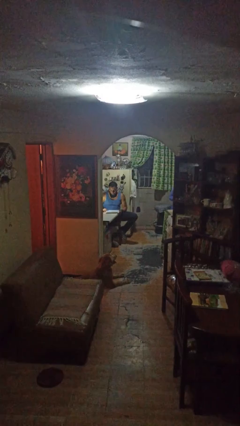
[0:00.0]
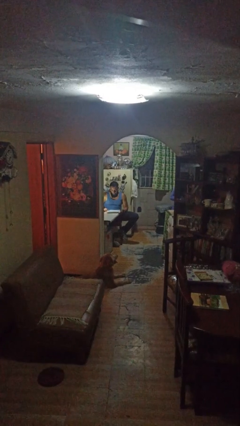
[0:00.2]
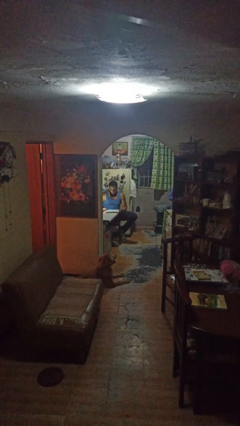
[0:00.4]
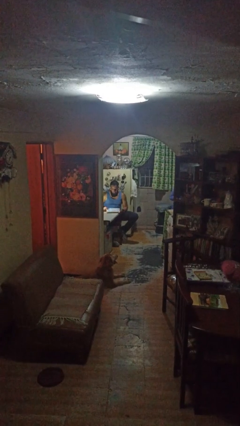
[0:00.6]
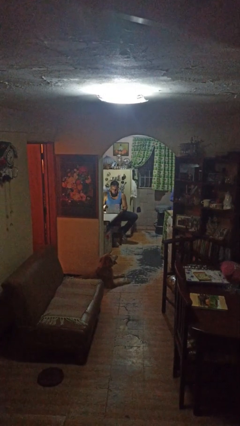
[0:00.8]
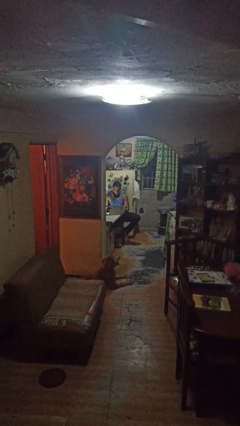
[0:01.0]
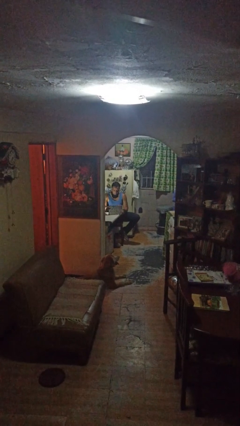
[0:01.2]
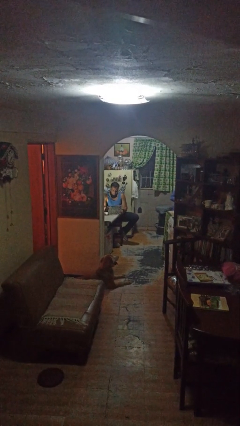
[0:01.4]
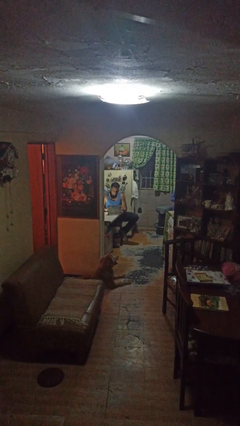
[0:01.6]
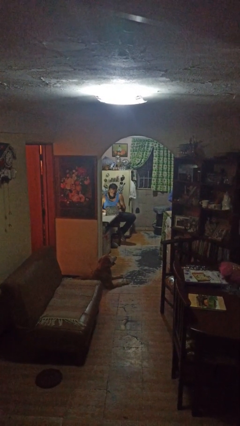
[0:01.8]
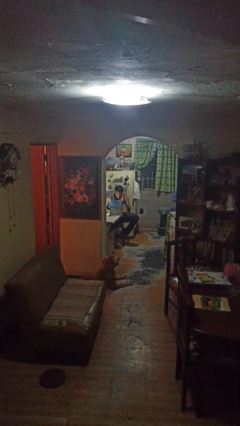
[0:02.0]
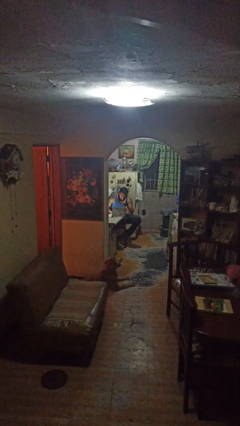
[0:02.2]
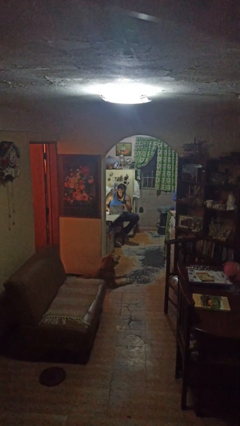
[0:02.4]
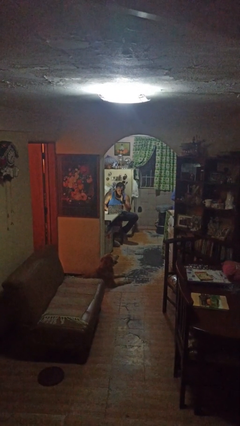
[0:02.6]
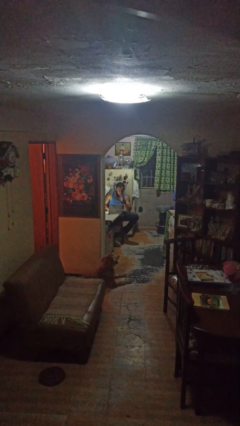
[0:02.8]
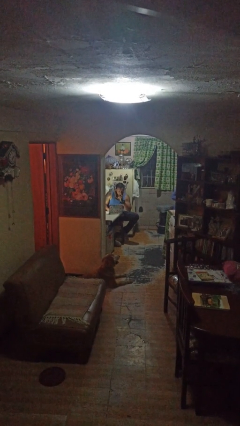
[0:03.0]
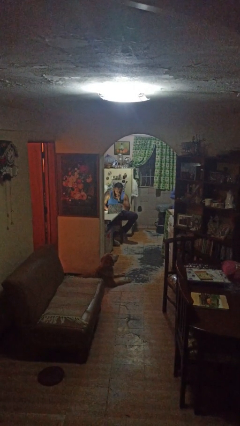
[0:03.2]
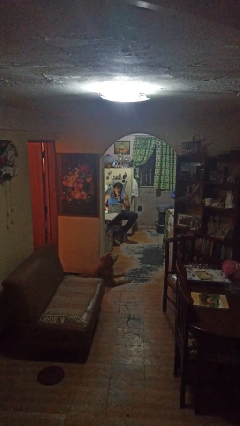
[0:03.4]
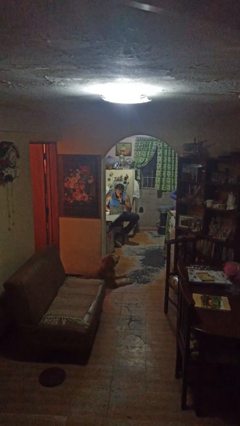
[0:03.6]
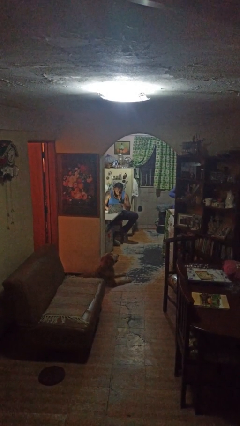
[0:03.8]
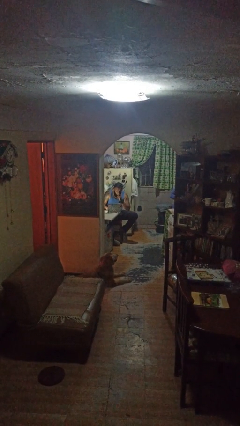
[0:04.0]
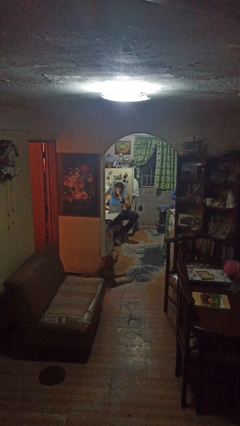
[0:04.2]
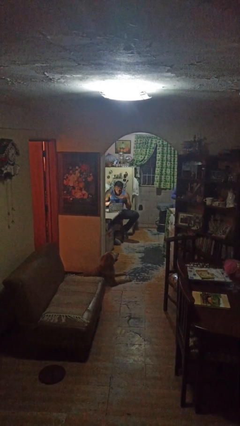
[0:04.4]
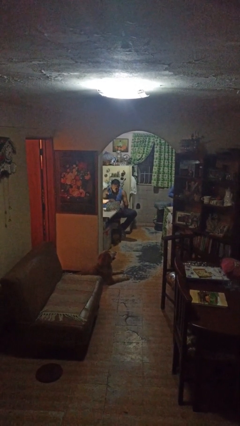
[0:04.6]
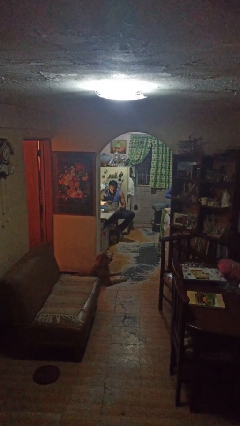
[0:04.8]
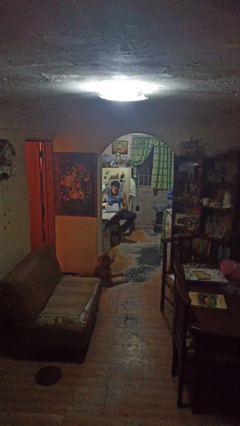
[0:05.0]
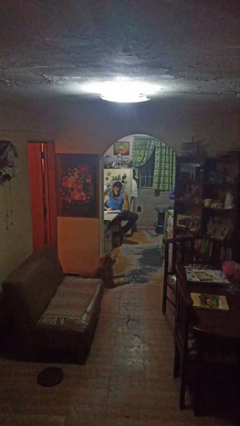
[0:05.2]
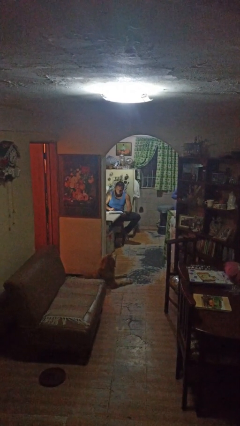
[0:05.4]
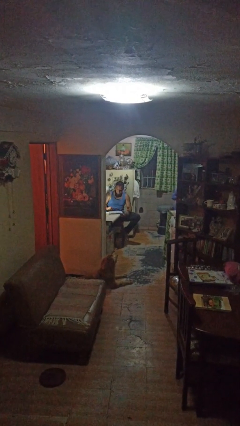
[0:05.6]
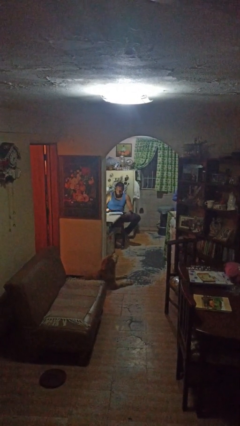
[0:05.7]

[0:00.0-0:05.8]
person interacts with laptop

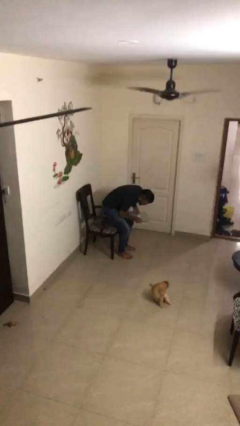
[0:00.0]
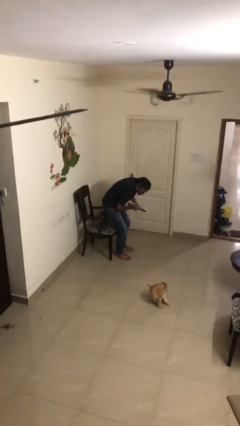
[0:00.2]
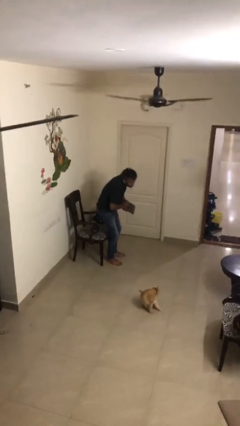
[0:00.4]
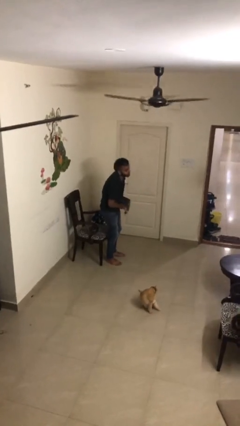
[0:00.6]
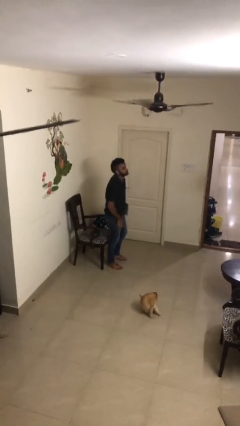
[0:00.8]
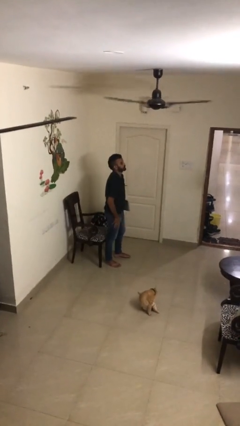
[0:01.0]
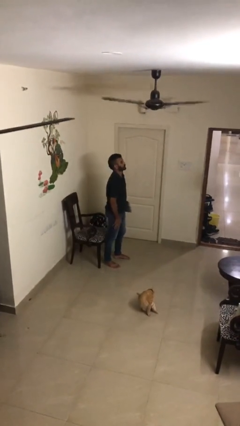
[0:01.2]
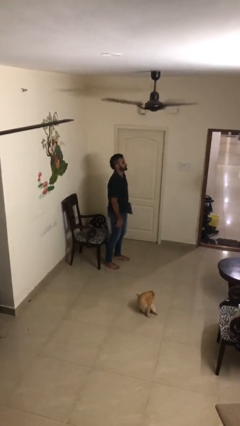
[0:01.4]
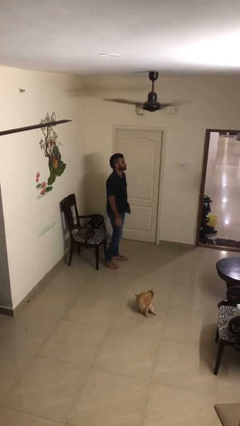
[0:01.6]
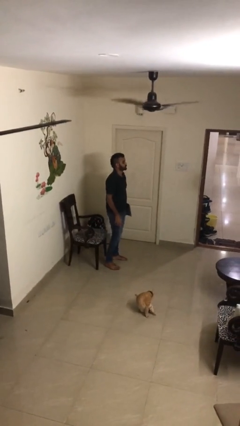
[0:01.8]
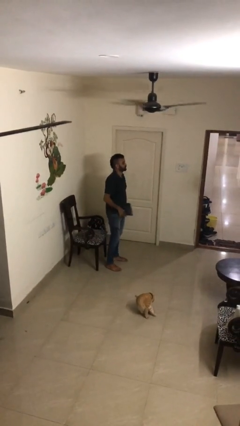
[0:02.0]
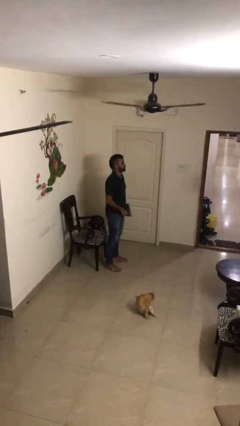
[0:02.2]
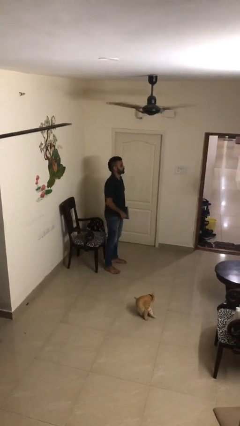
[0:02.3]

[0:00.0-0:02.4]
person stands up

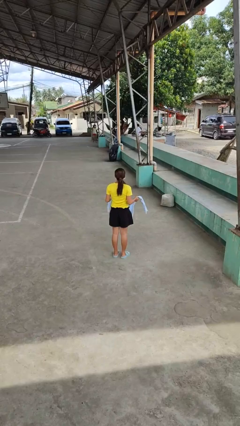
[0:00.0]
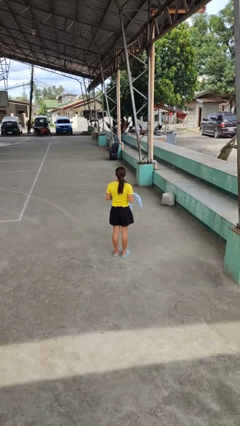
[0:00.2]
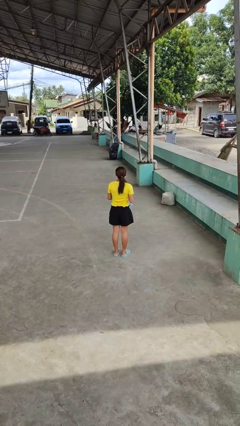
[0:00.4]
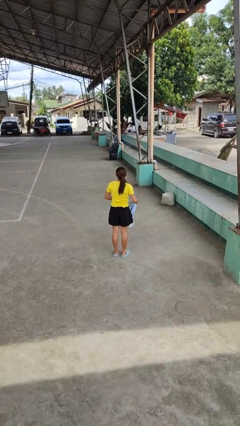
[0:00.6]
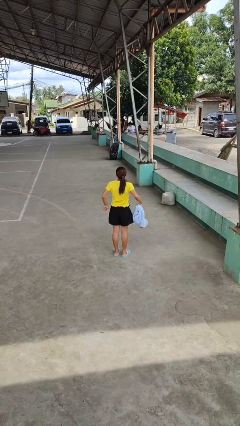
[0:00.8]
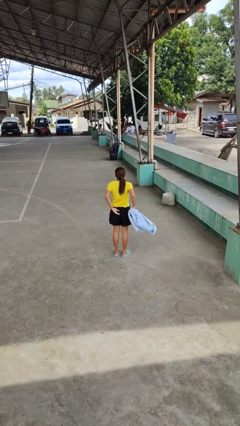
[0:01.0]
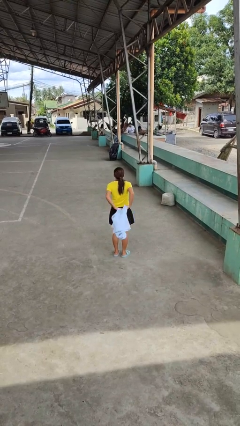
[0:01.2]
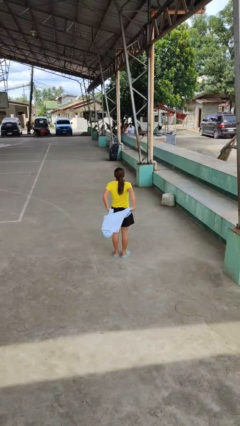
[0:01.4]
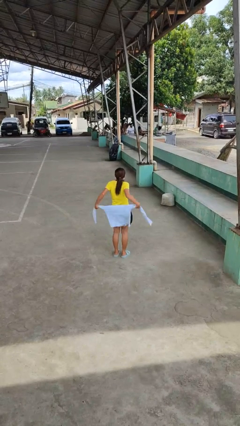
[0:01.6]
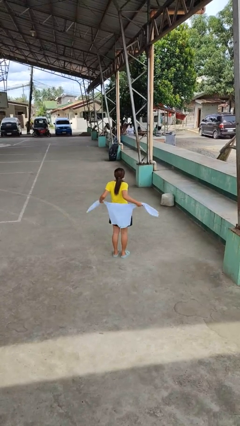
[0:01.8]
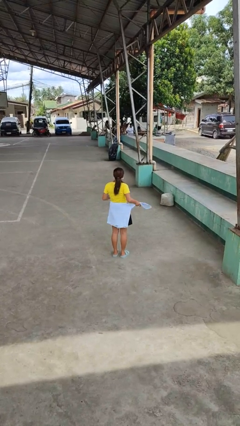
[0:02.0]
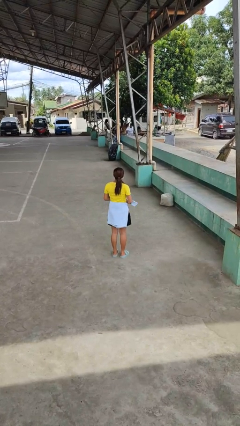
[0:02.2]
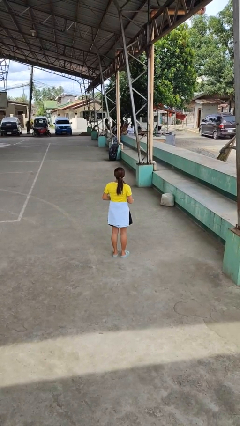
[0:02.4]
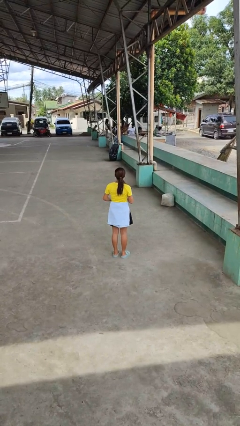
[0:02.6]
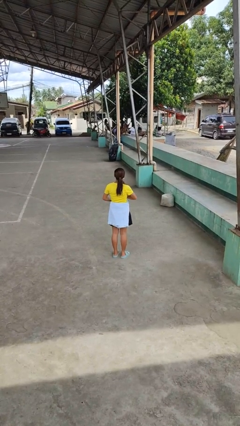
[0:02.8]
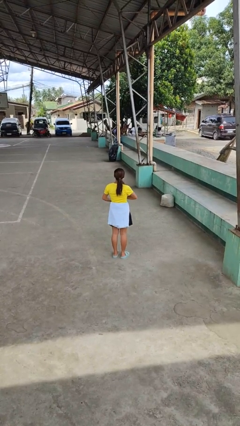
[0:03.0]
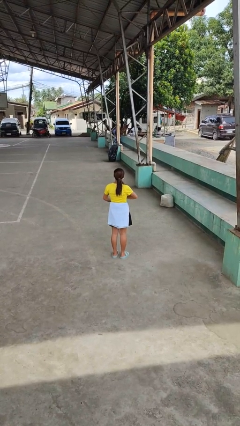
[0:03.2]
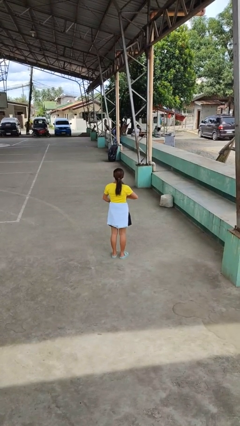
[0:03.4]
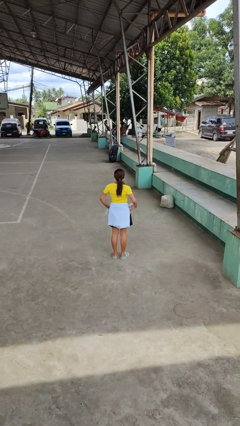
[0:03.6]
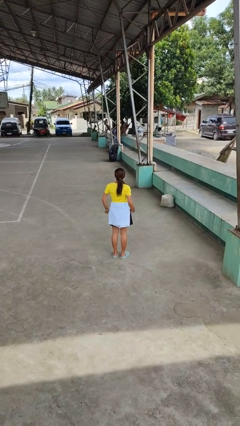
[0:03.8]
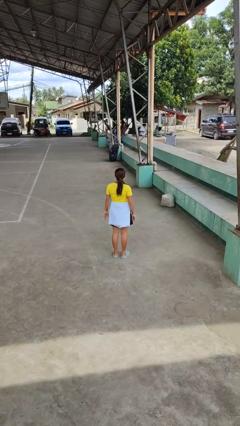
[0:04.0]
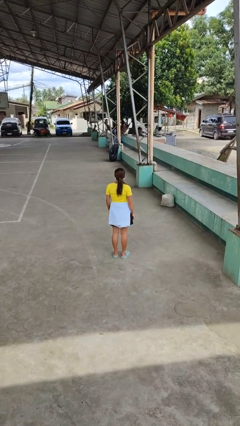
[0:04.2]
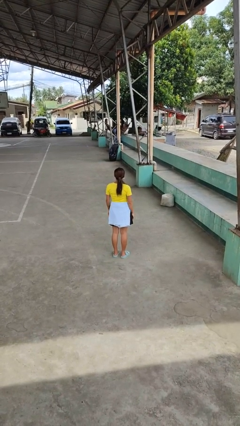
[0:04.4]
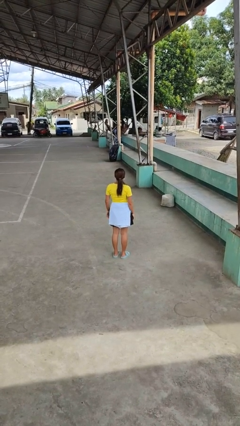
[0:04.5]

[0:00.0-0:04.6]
person ties jacket around waist

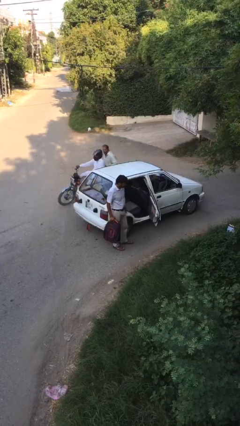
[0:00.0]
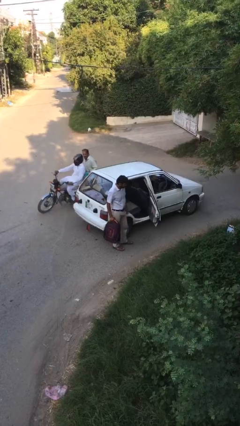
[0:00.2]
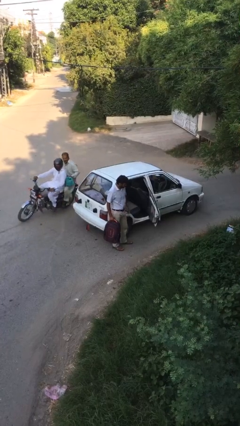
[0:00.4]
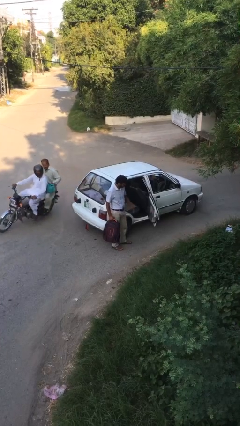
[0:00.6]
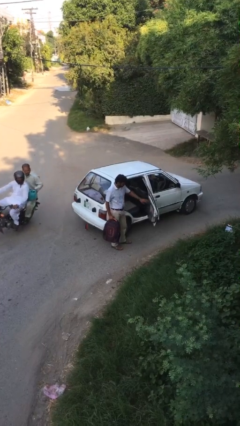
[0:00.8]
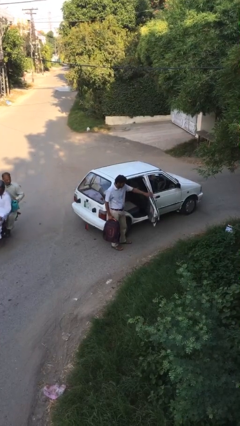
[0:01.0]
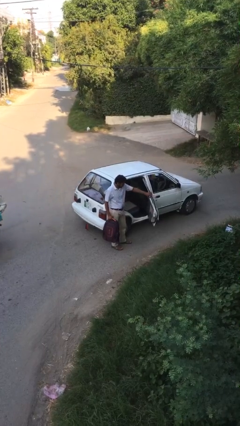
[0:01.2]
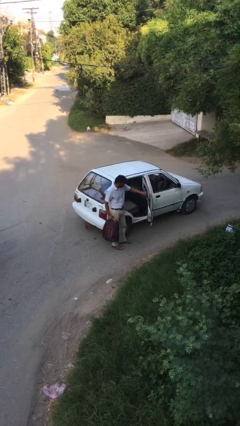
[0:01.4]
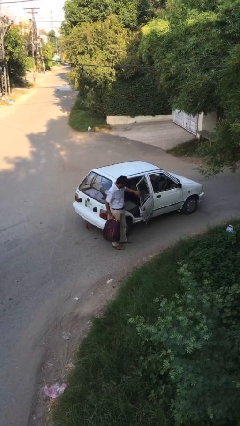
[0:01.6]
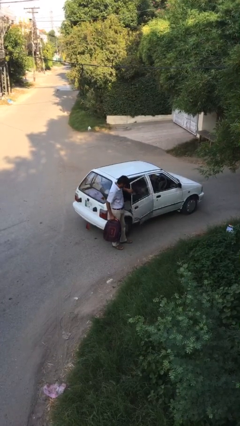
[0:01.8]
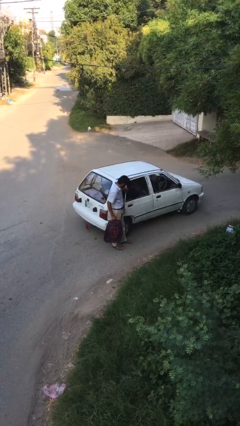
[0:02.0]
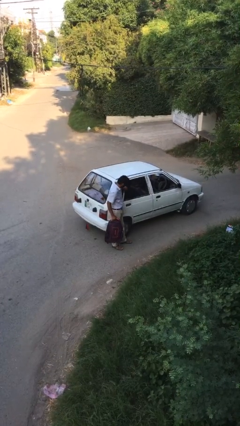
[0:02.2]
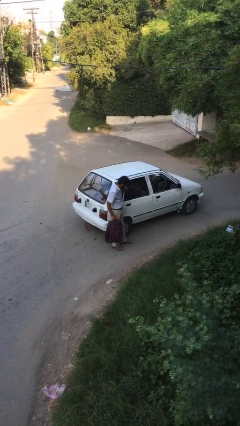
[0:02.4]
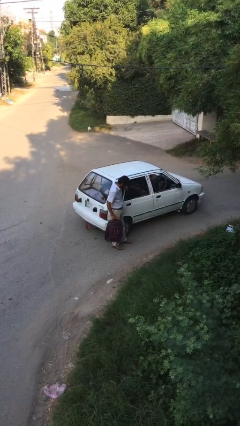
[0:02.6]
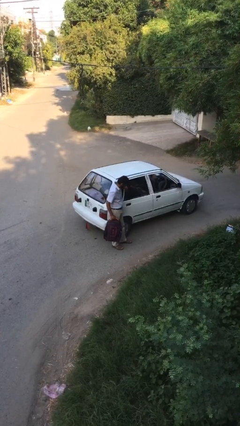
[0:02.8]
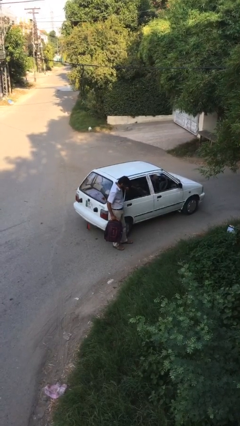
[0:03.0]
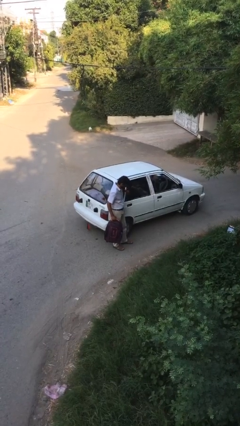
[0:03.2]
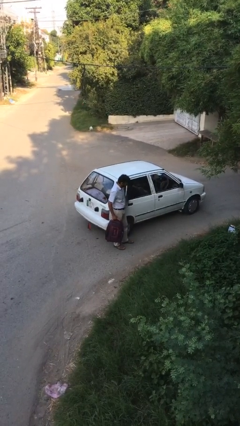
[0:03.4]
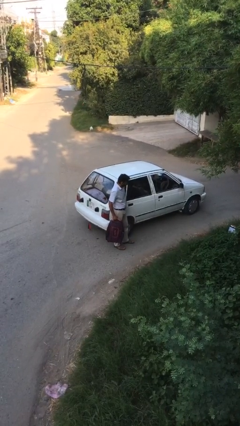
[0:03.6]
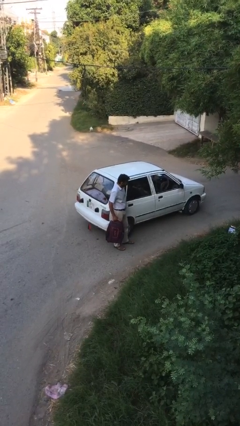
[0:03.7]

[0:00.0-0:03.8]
person closes car door

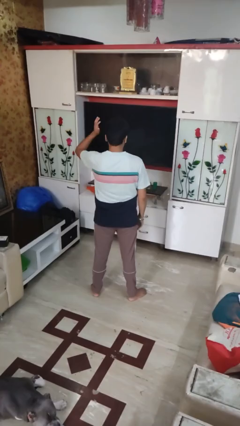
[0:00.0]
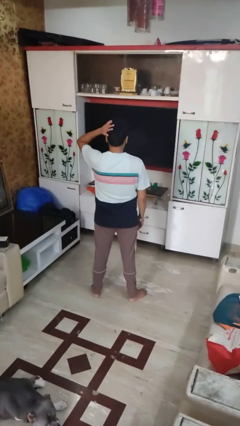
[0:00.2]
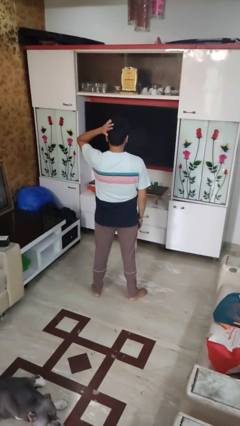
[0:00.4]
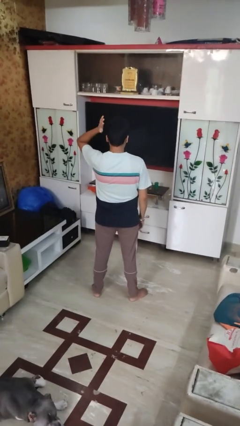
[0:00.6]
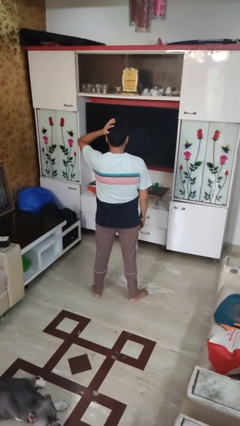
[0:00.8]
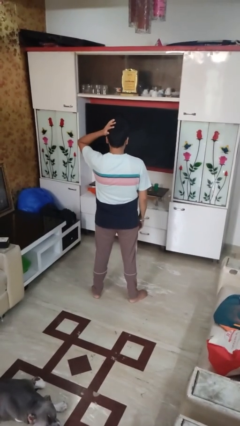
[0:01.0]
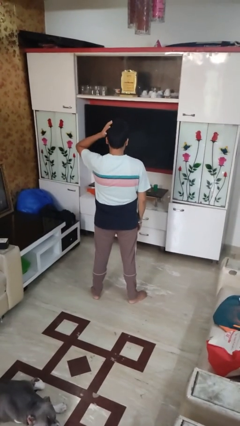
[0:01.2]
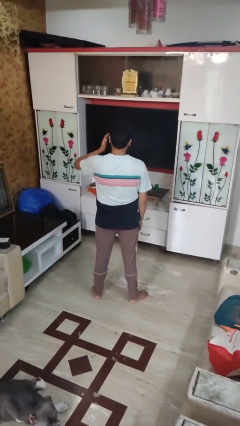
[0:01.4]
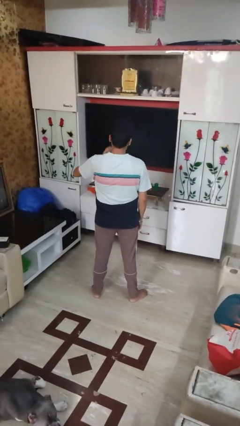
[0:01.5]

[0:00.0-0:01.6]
person pats head
